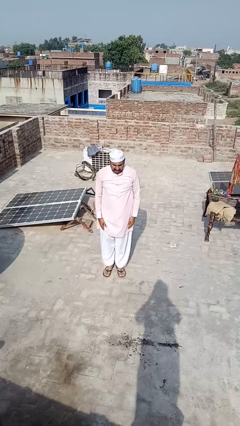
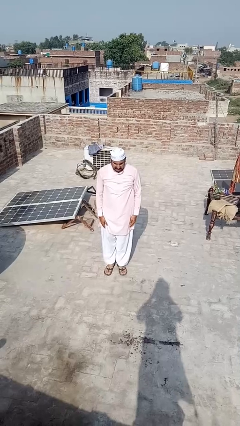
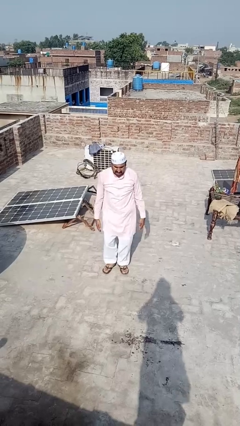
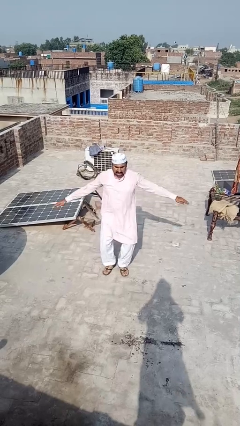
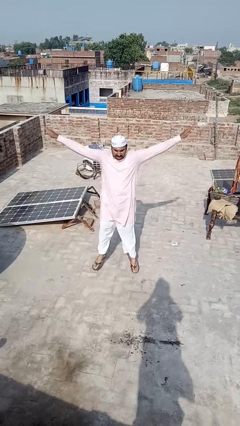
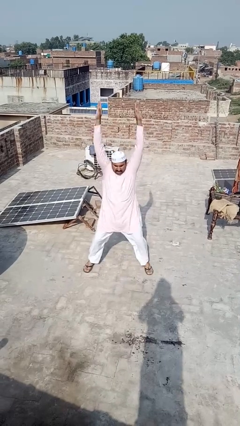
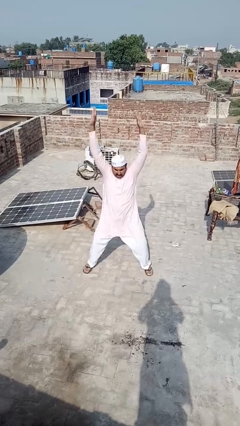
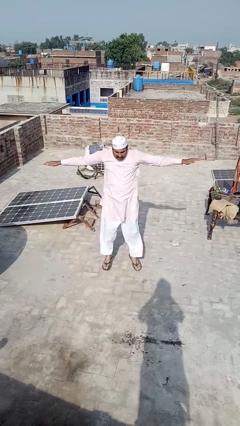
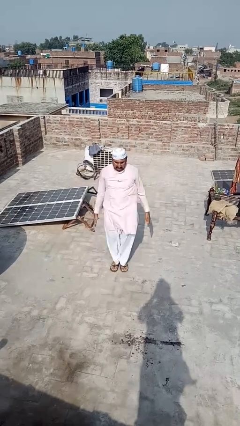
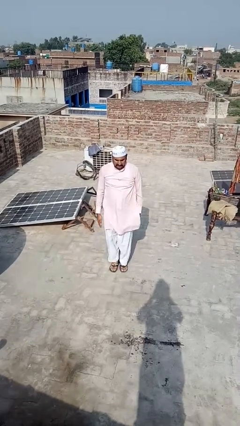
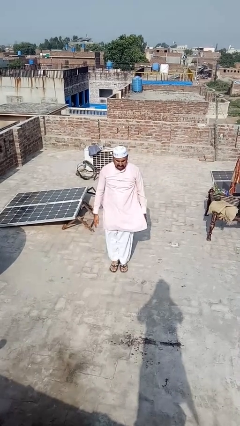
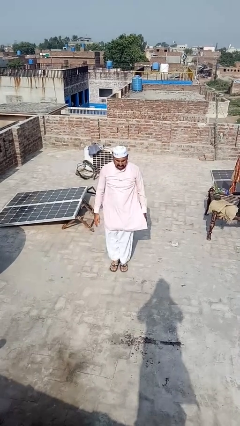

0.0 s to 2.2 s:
person exercises with jumping jacks

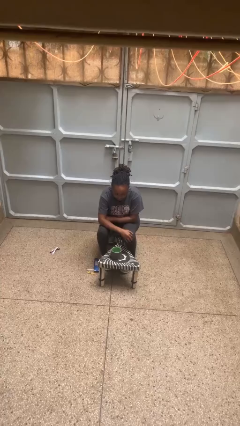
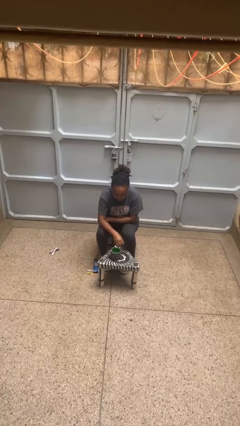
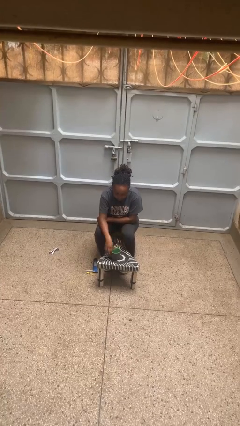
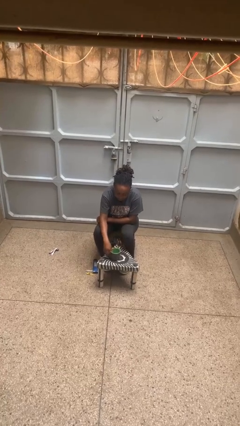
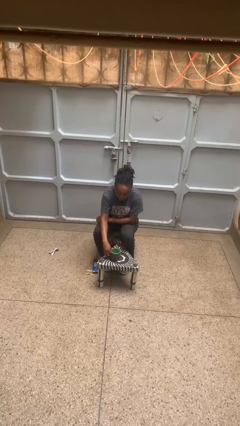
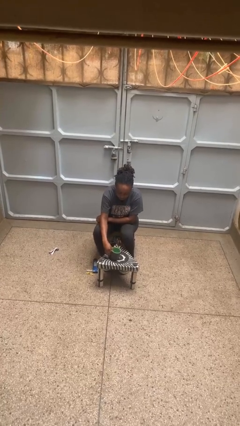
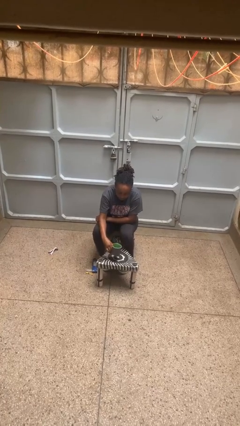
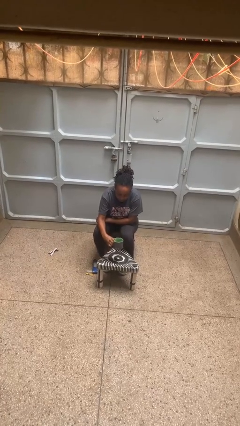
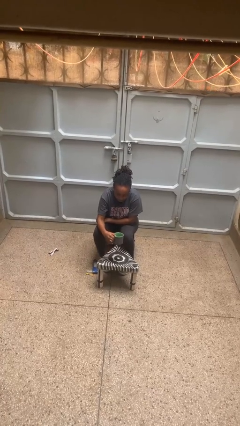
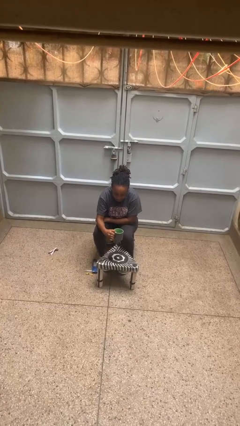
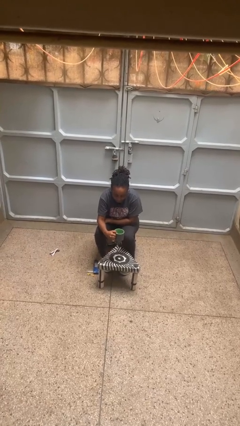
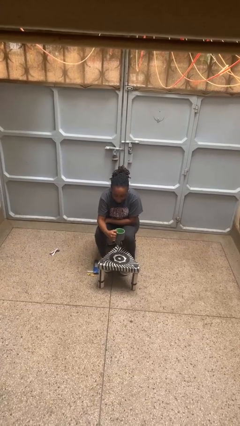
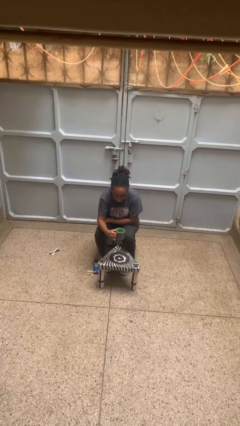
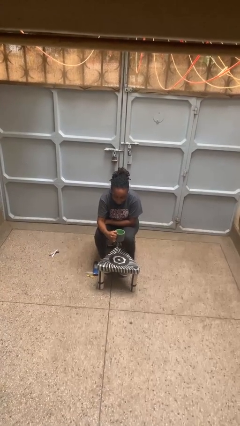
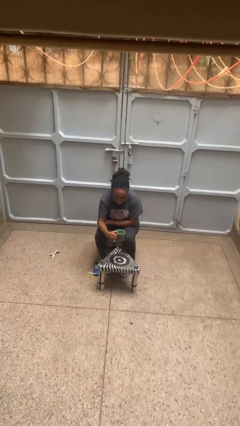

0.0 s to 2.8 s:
person picks up object from table

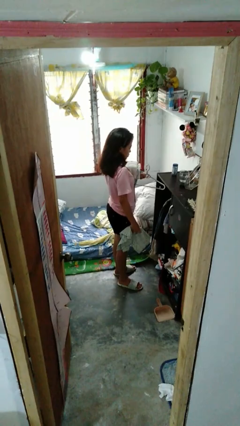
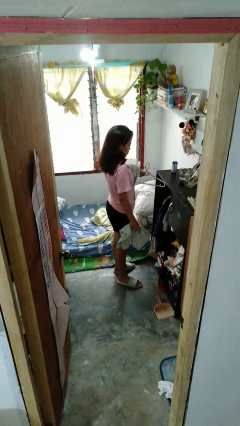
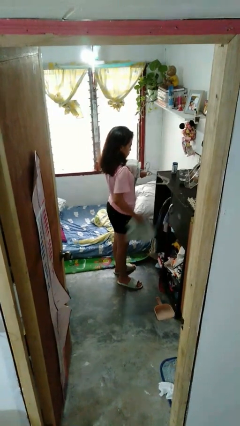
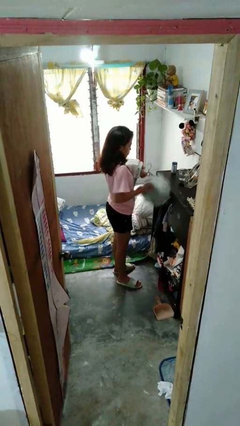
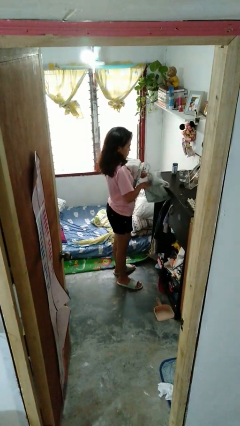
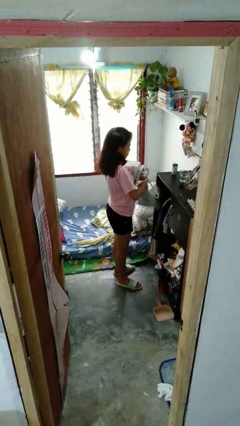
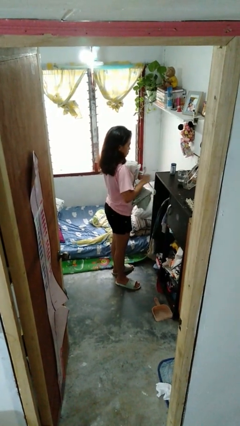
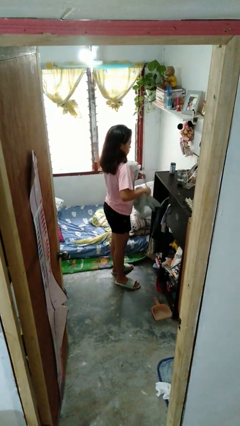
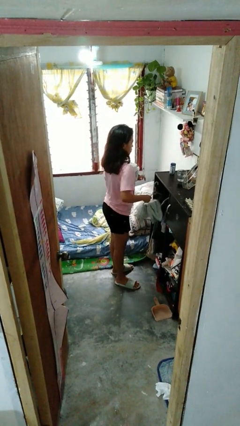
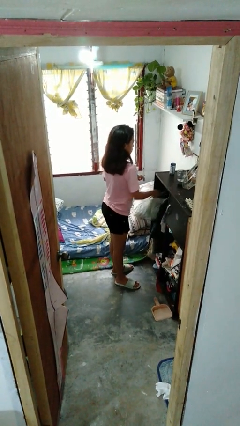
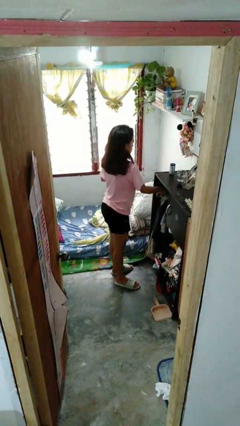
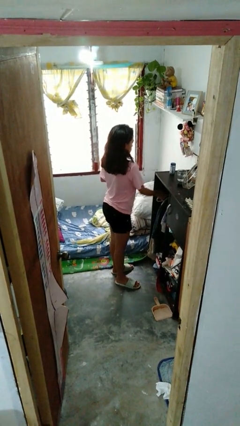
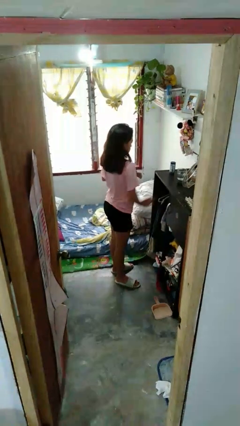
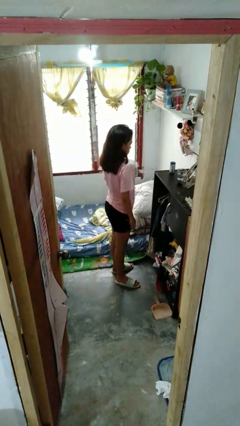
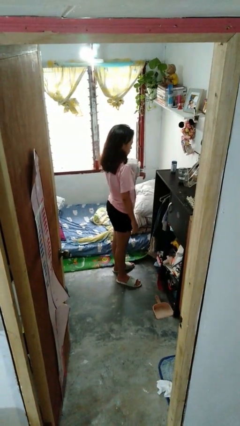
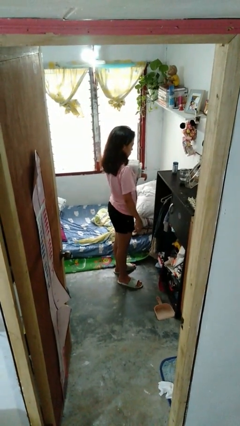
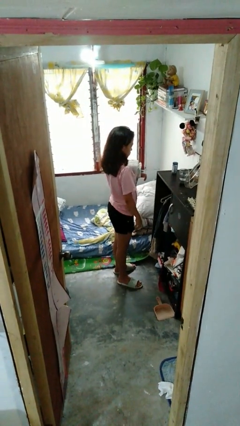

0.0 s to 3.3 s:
person puts clothes into closet

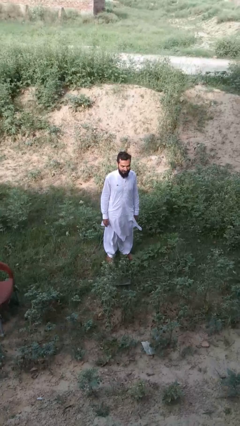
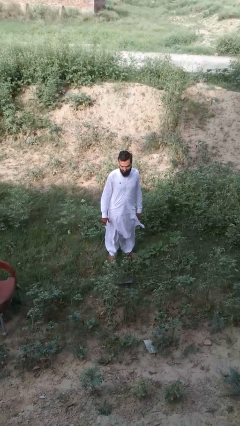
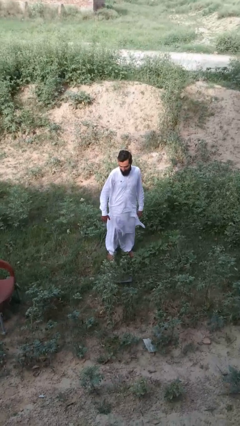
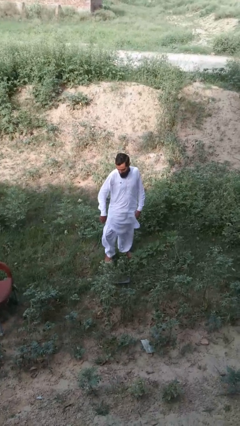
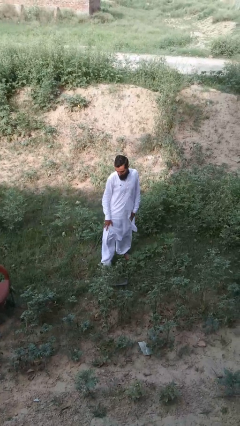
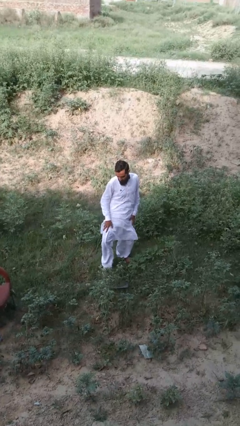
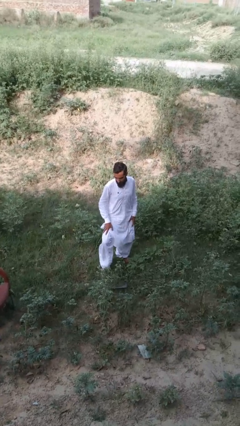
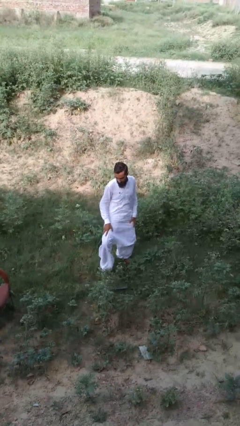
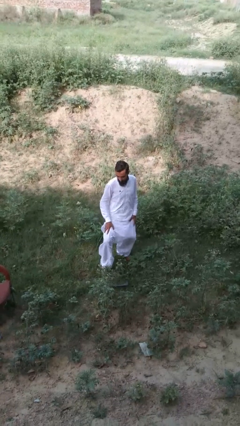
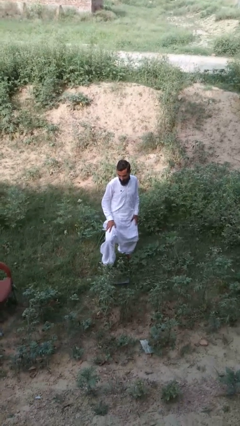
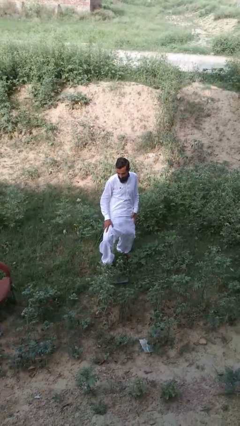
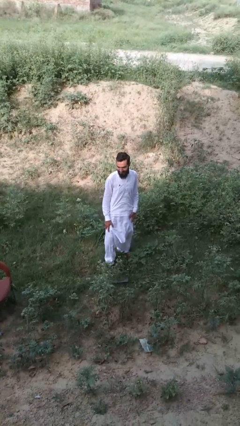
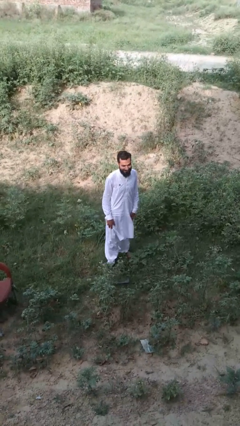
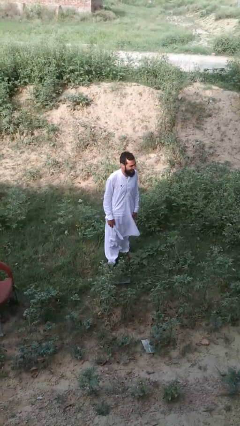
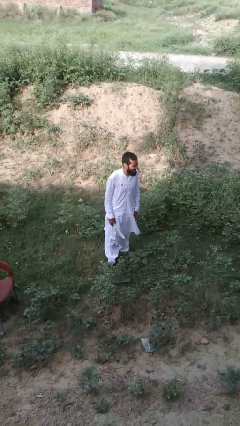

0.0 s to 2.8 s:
person dances in place

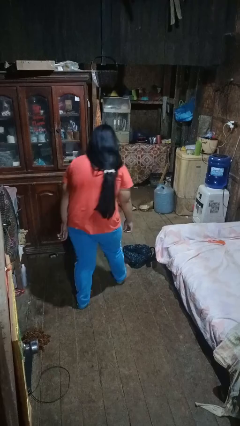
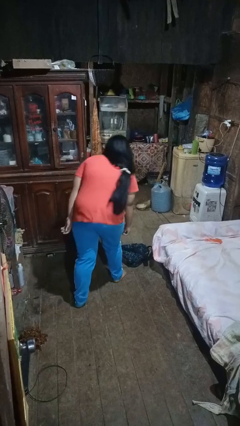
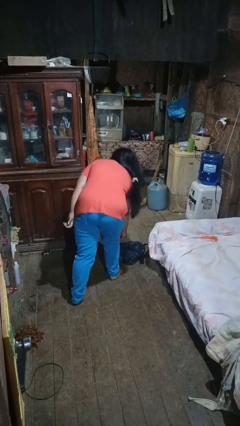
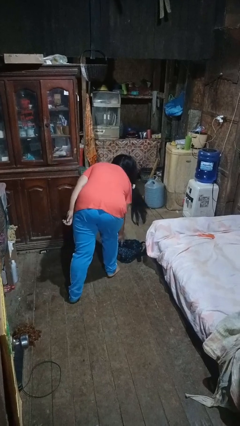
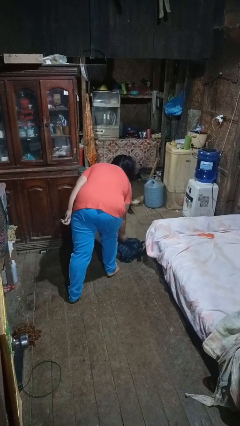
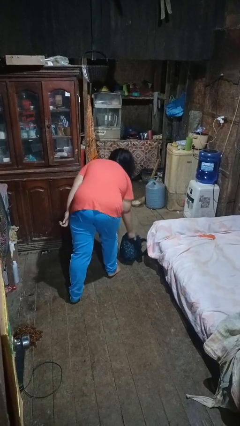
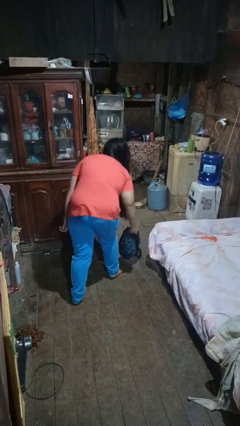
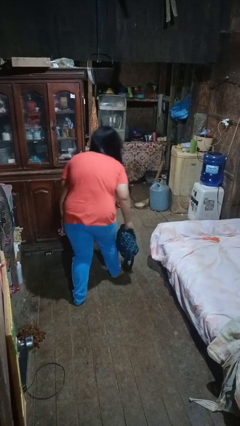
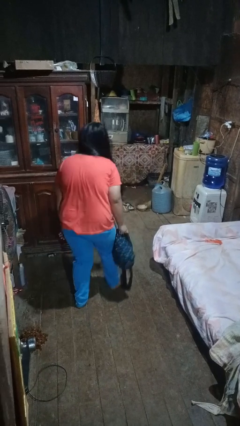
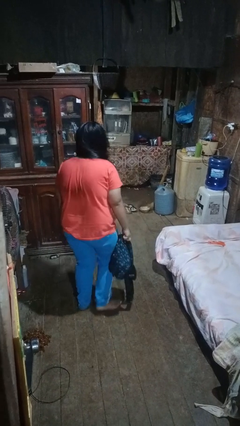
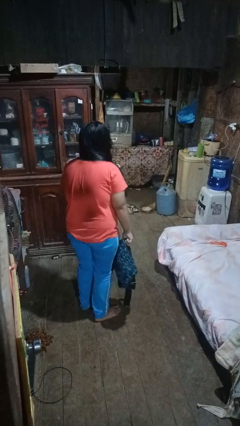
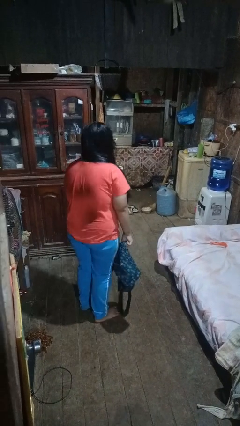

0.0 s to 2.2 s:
person picks up object from floor

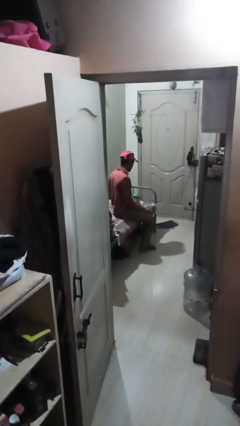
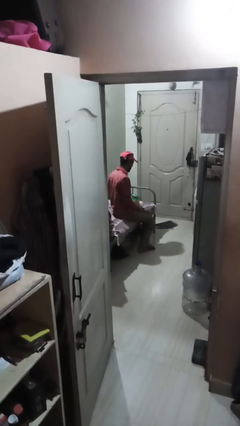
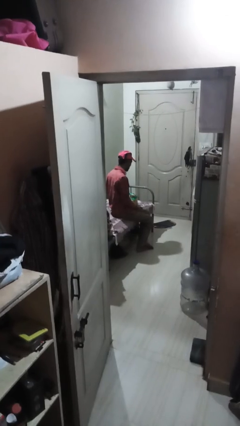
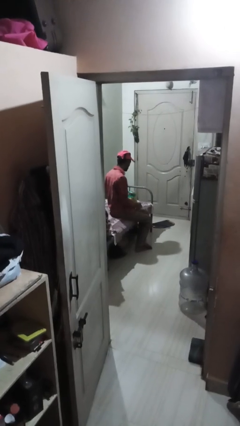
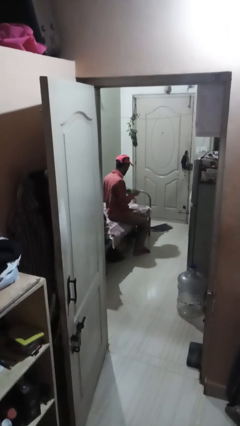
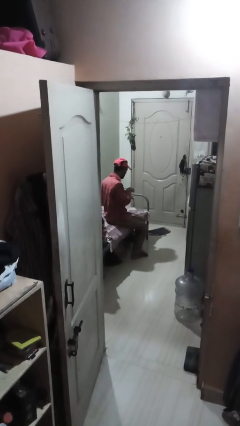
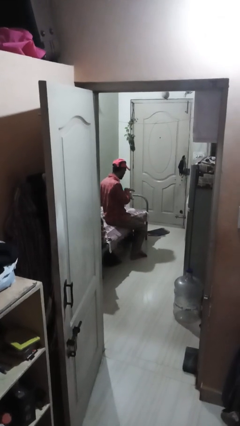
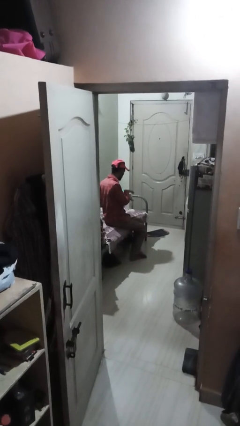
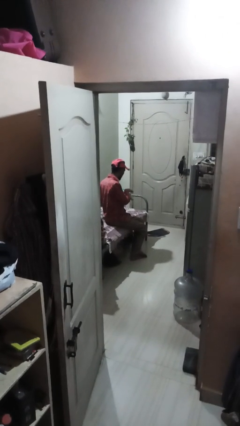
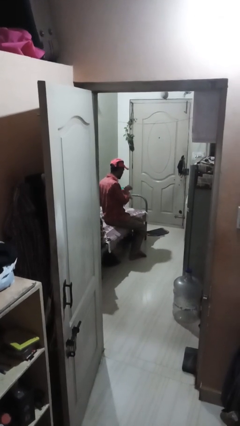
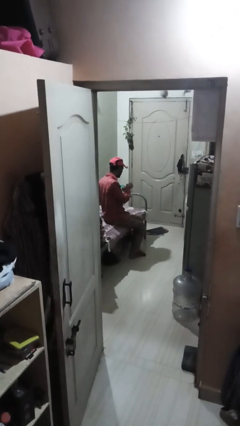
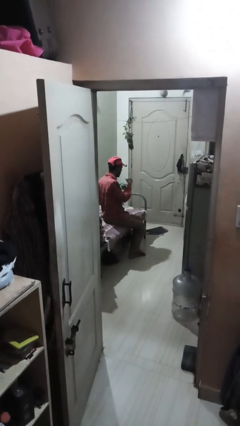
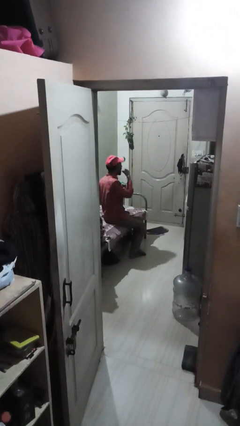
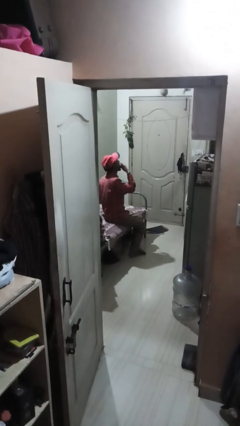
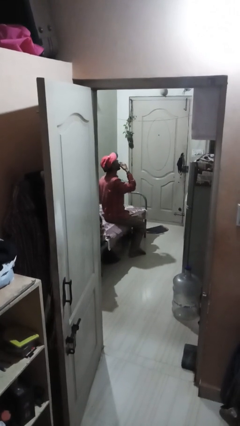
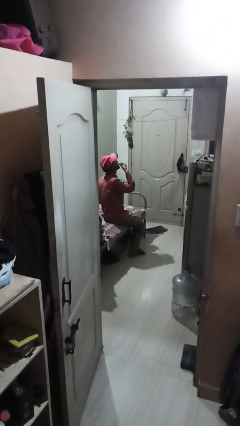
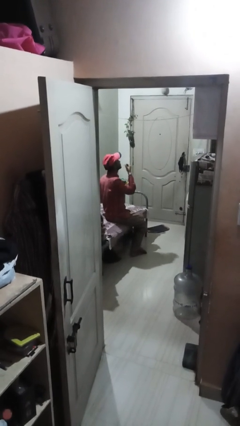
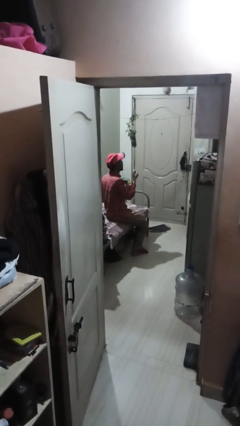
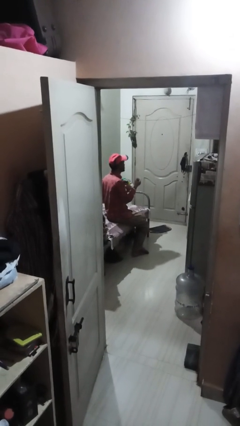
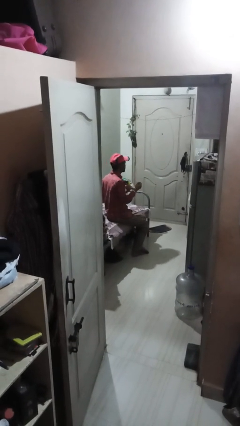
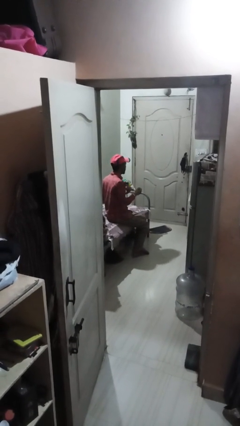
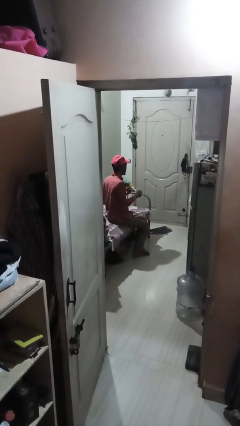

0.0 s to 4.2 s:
person eats snack from bag

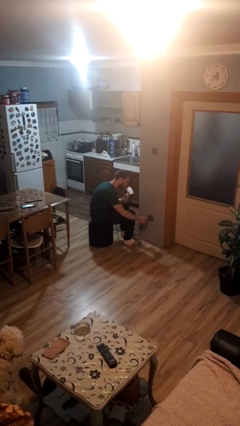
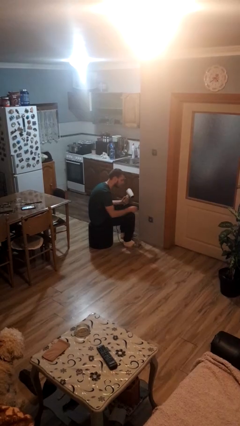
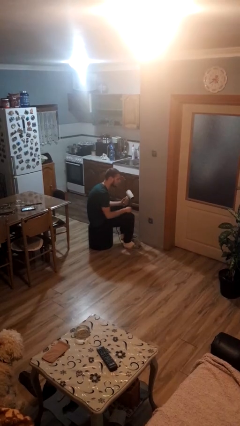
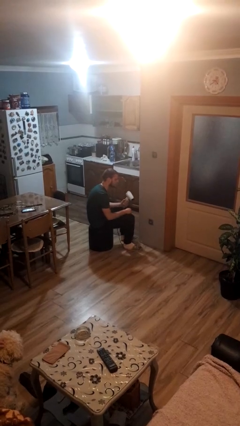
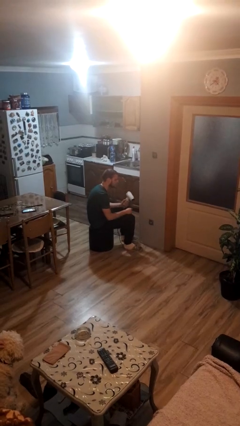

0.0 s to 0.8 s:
person unplugs from electrical socket
